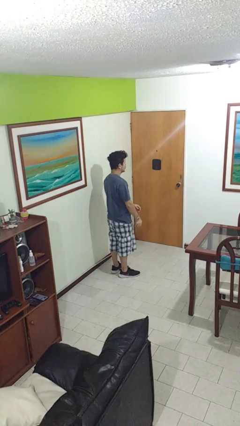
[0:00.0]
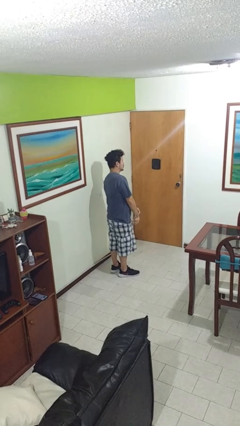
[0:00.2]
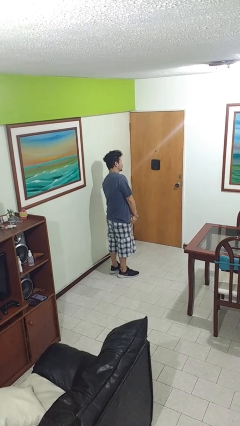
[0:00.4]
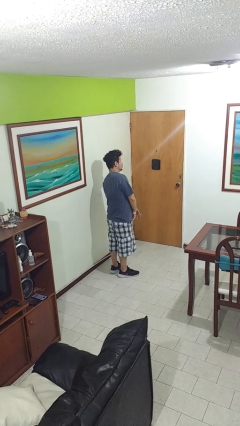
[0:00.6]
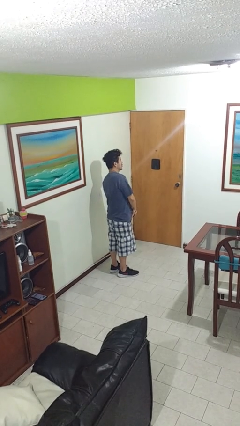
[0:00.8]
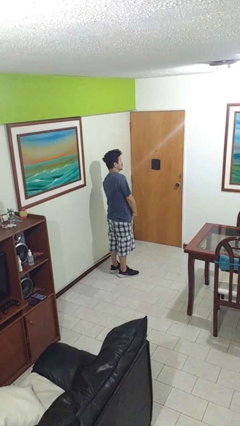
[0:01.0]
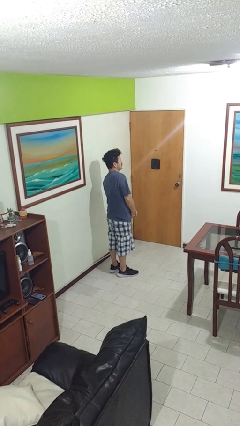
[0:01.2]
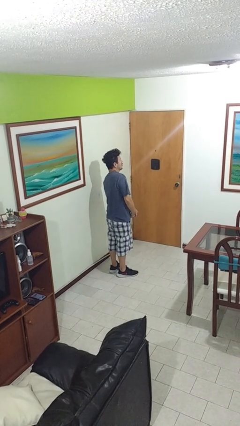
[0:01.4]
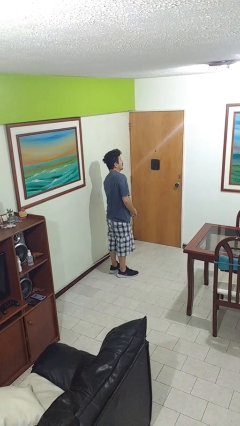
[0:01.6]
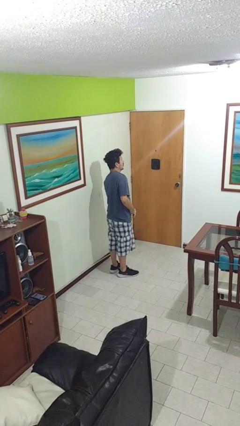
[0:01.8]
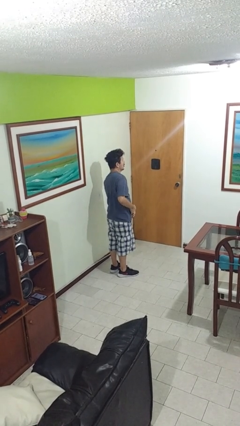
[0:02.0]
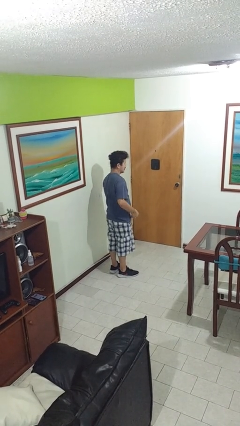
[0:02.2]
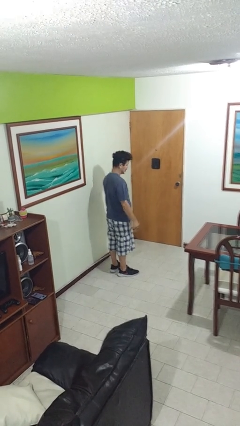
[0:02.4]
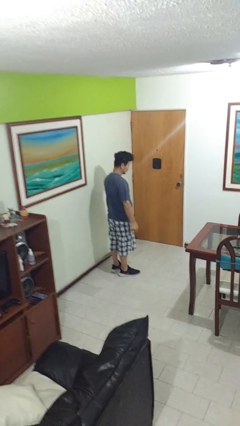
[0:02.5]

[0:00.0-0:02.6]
person takes off wristwatch

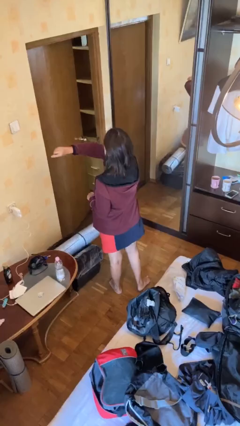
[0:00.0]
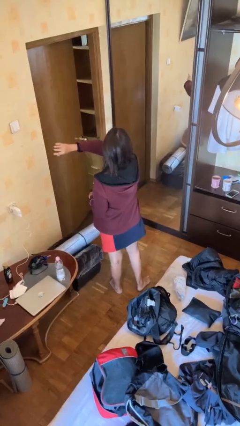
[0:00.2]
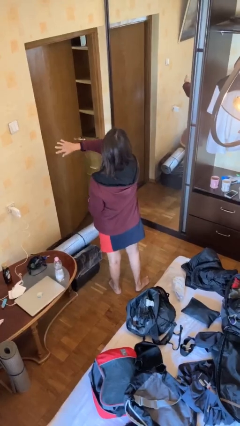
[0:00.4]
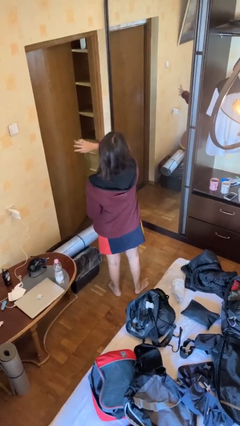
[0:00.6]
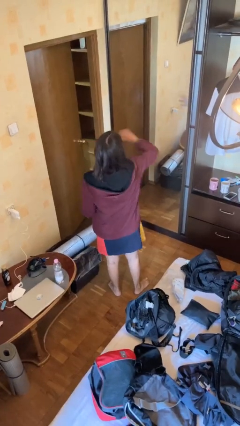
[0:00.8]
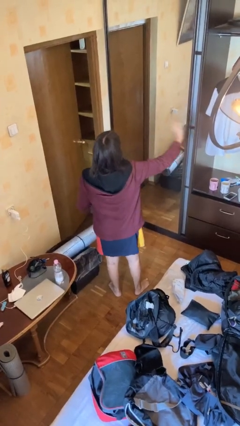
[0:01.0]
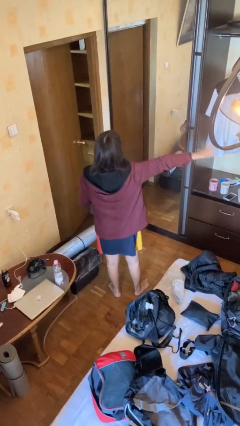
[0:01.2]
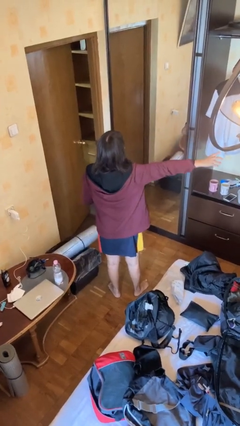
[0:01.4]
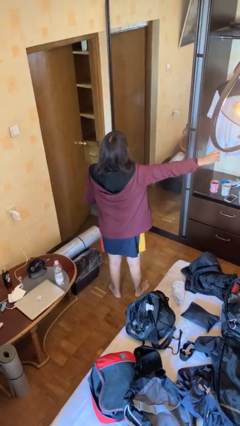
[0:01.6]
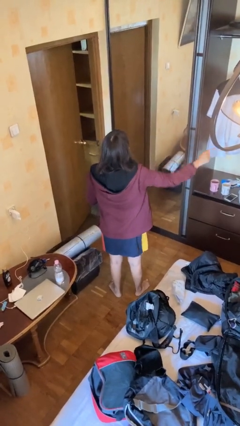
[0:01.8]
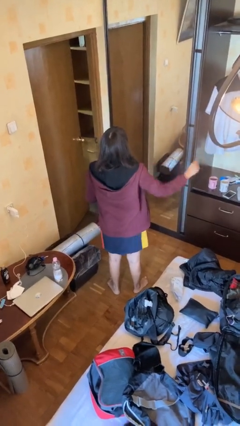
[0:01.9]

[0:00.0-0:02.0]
person gestures swipe right

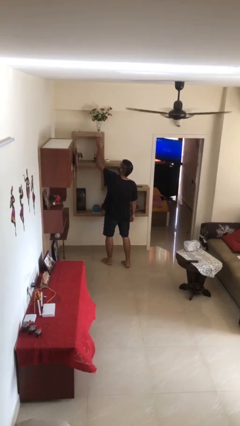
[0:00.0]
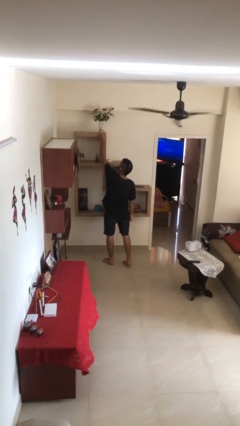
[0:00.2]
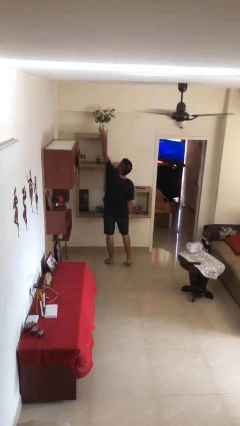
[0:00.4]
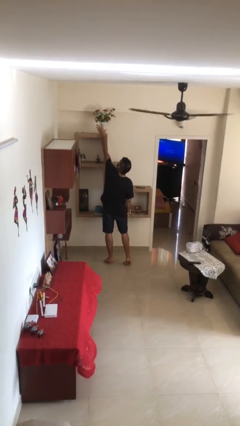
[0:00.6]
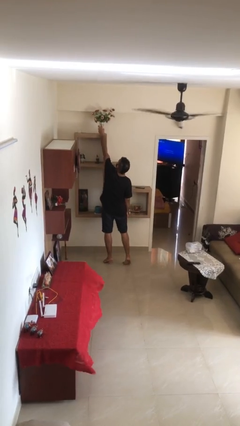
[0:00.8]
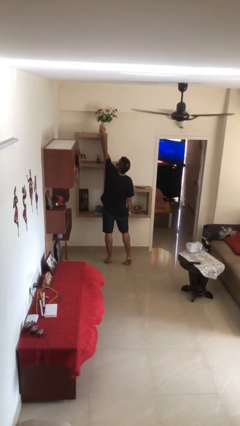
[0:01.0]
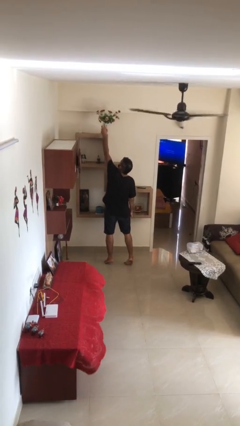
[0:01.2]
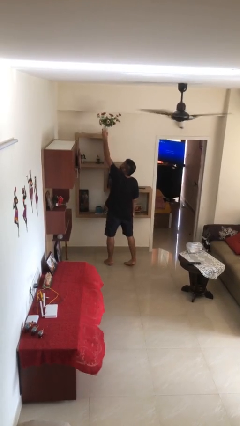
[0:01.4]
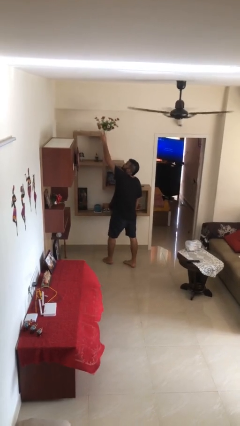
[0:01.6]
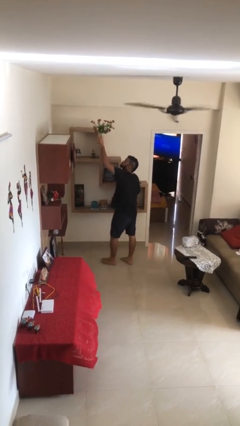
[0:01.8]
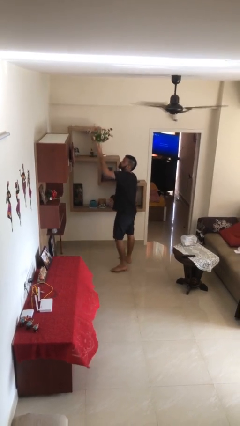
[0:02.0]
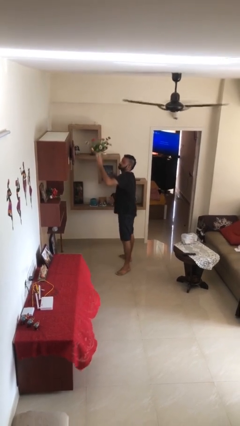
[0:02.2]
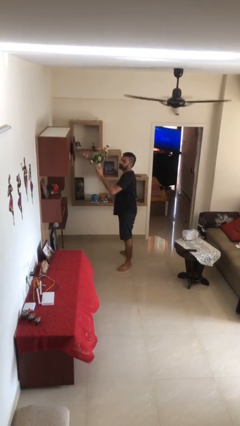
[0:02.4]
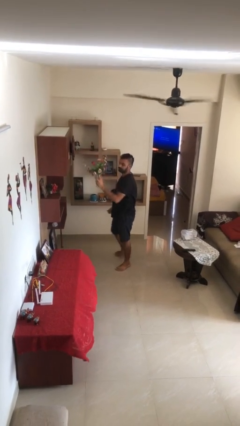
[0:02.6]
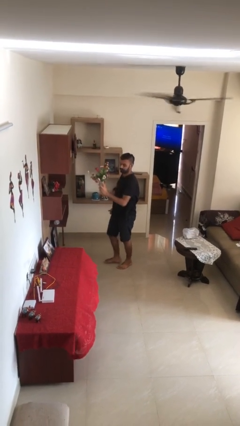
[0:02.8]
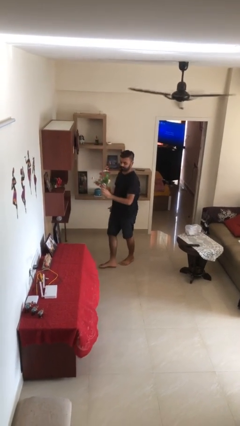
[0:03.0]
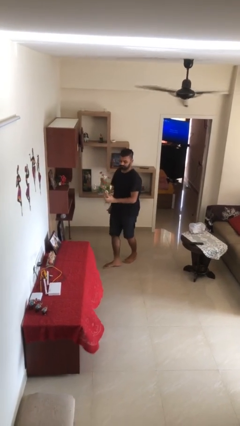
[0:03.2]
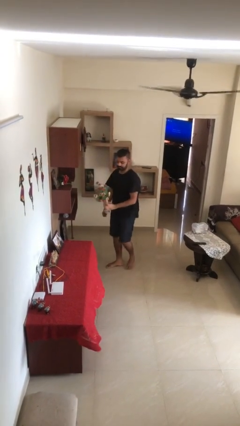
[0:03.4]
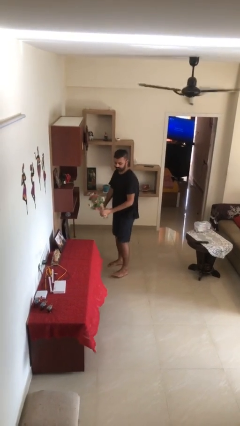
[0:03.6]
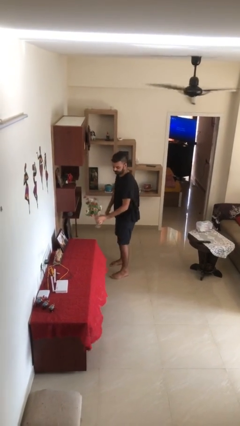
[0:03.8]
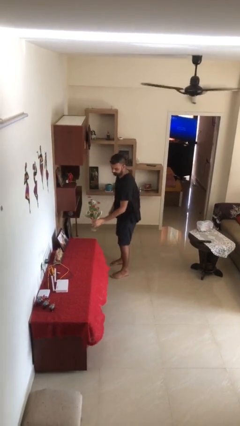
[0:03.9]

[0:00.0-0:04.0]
person picks up object from shelf

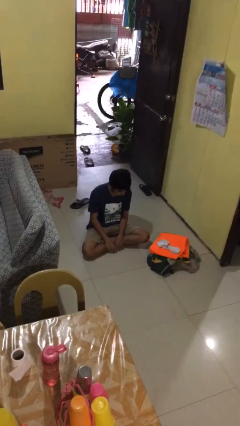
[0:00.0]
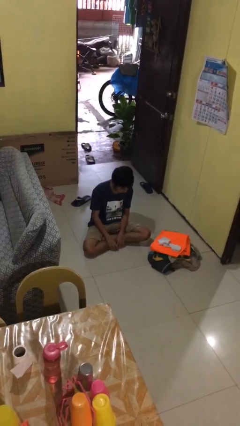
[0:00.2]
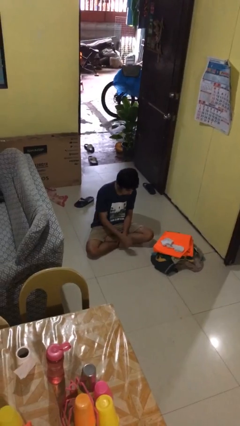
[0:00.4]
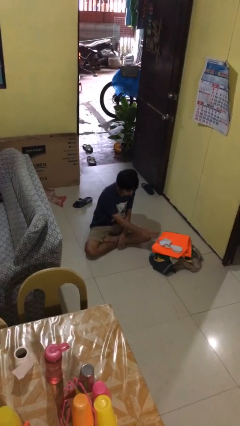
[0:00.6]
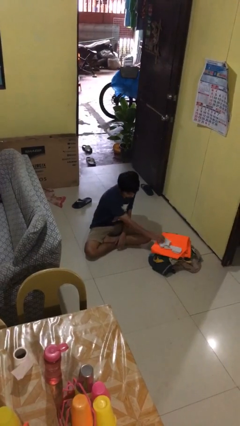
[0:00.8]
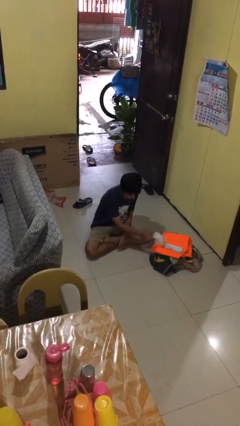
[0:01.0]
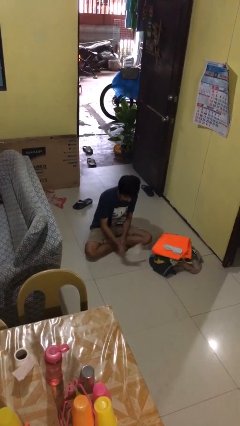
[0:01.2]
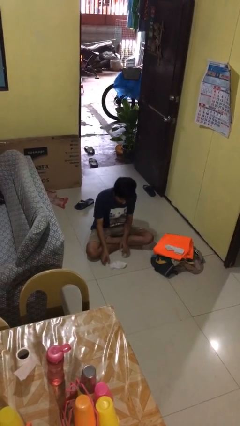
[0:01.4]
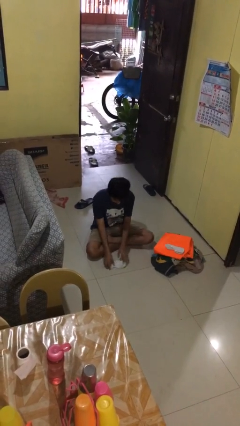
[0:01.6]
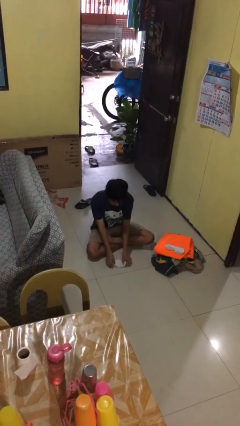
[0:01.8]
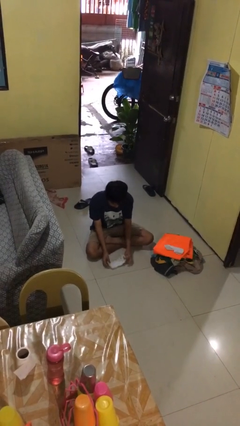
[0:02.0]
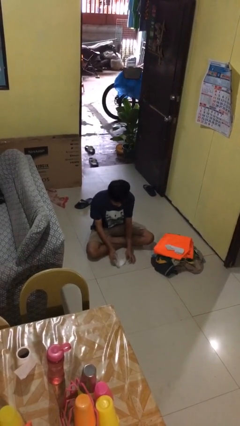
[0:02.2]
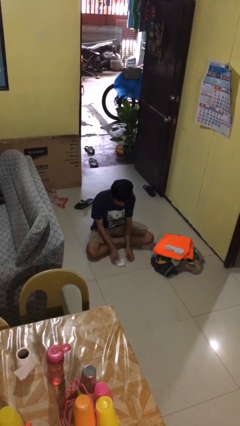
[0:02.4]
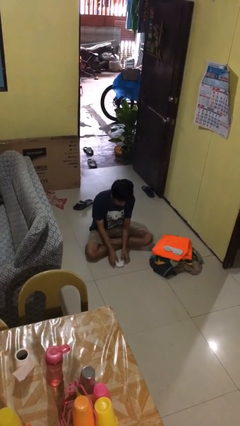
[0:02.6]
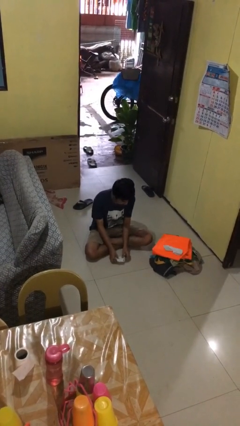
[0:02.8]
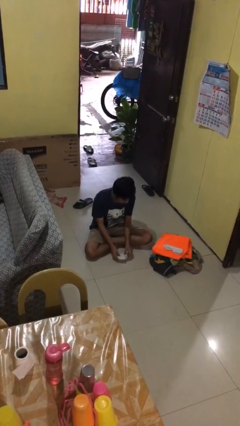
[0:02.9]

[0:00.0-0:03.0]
person folds socks

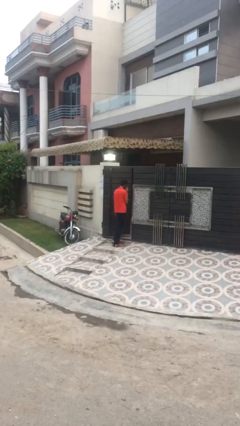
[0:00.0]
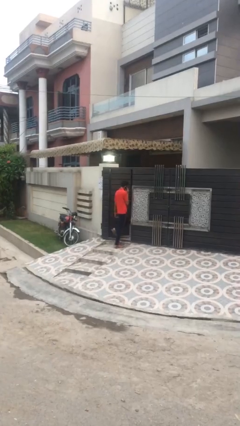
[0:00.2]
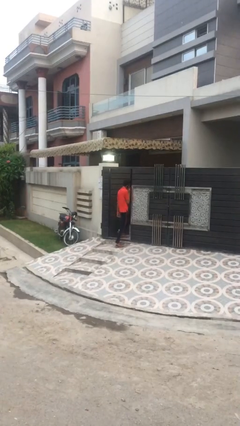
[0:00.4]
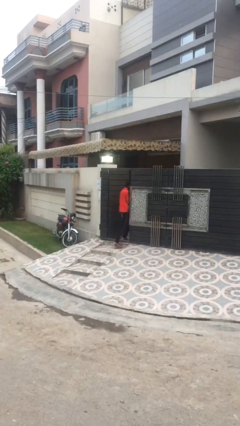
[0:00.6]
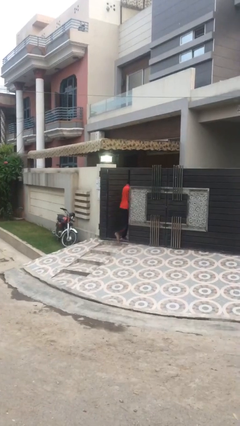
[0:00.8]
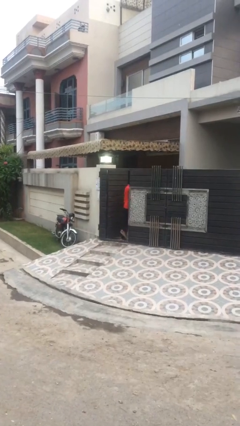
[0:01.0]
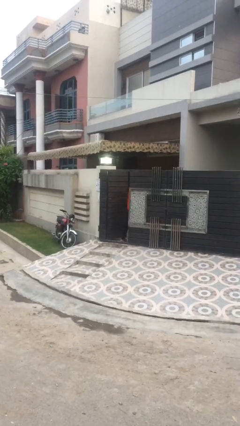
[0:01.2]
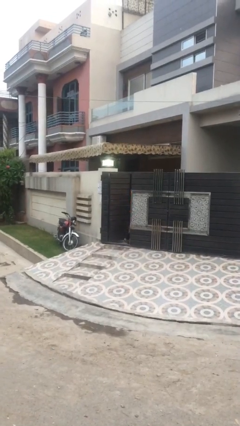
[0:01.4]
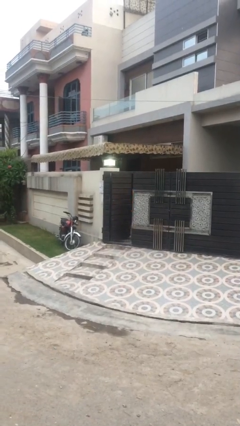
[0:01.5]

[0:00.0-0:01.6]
person exits scene through structure

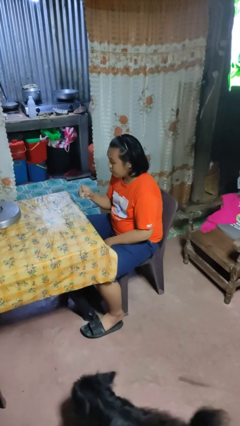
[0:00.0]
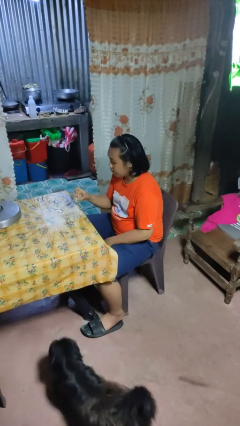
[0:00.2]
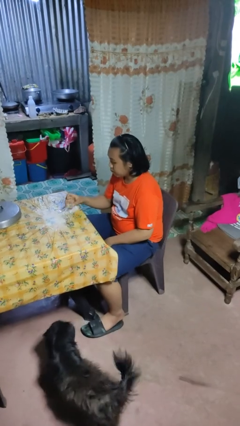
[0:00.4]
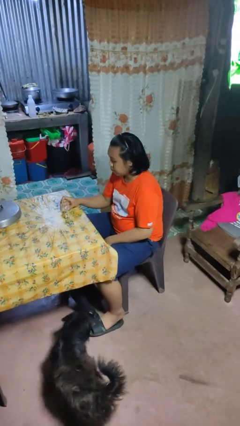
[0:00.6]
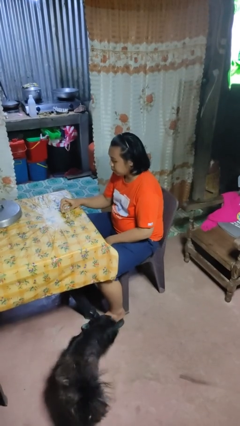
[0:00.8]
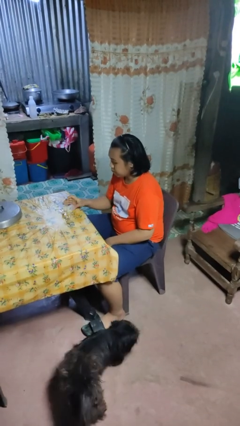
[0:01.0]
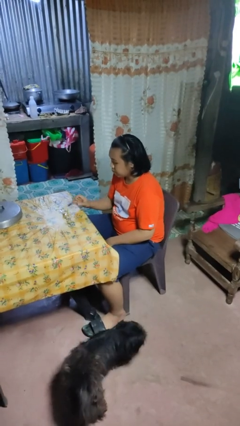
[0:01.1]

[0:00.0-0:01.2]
person puts down object on table

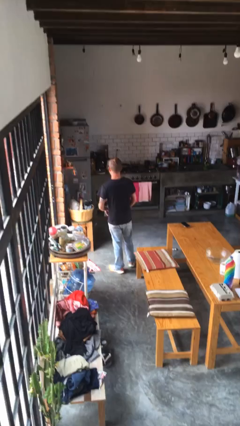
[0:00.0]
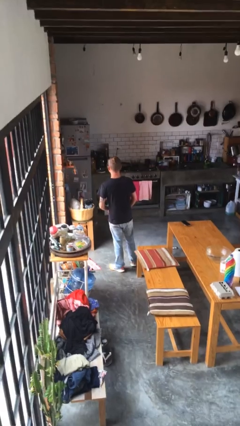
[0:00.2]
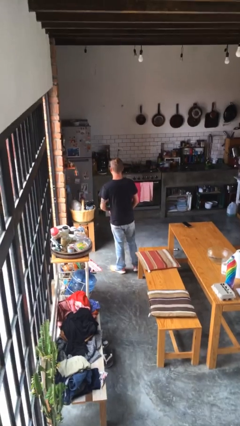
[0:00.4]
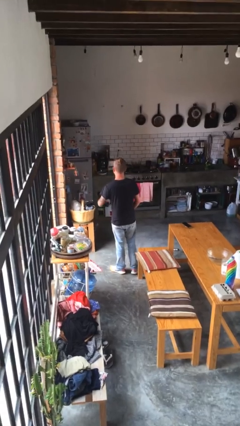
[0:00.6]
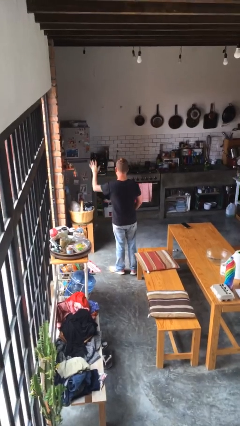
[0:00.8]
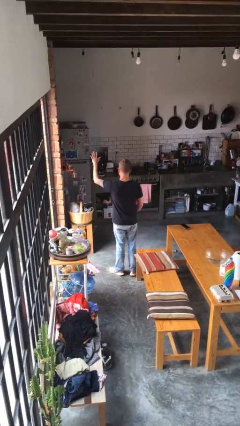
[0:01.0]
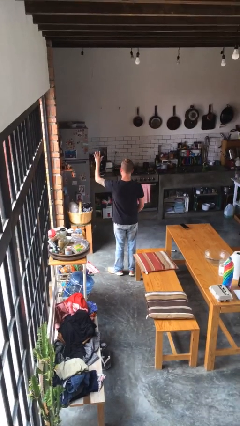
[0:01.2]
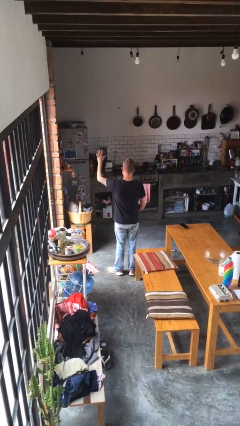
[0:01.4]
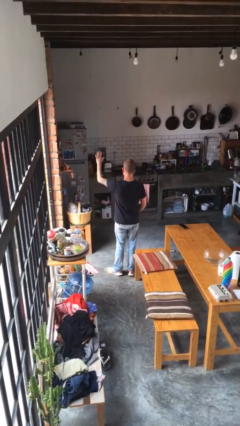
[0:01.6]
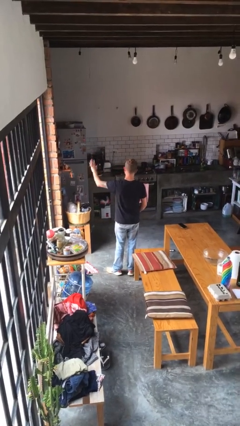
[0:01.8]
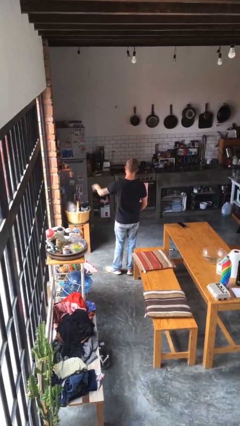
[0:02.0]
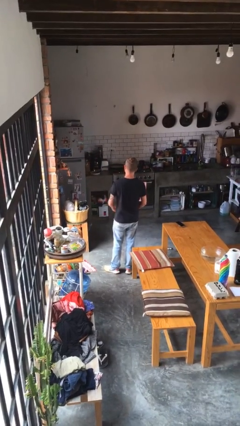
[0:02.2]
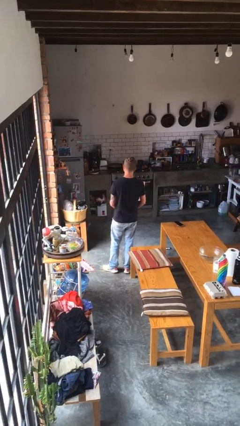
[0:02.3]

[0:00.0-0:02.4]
person gestures number five
